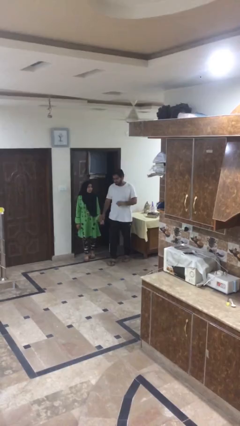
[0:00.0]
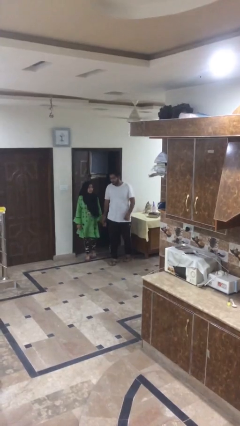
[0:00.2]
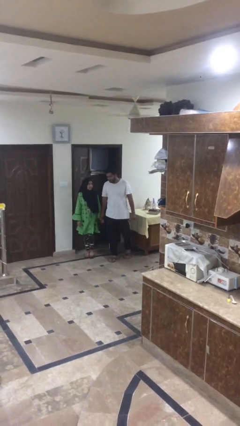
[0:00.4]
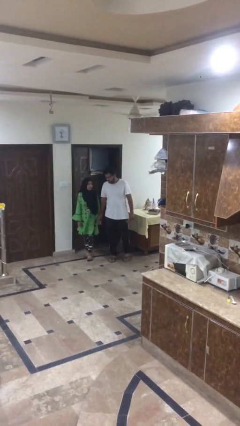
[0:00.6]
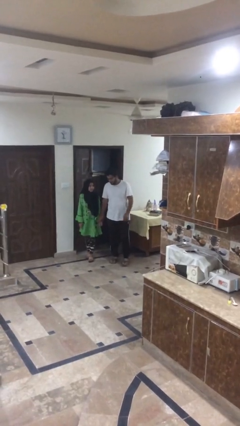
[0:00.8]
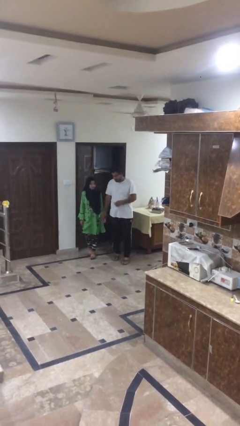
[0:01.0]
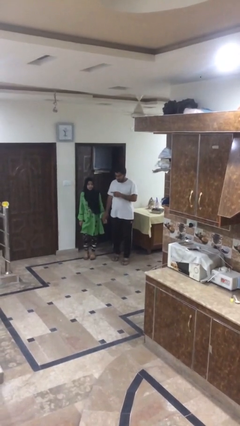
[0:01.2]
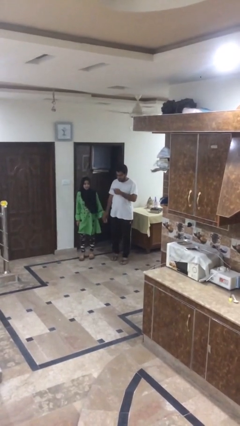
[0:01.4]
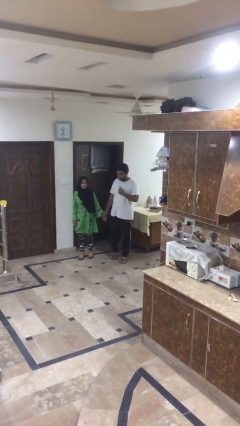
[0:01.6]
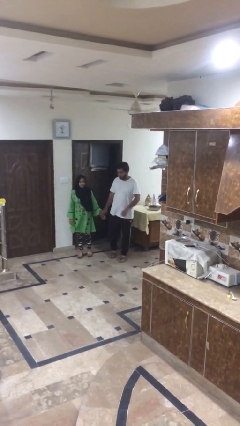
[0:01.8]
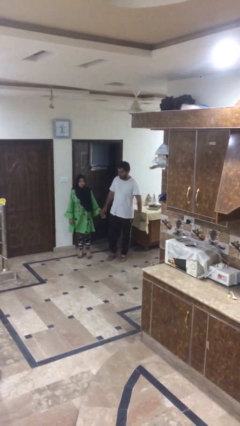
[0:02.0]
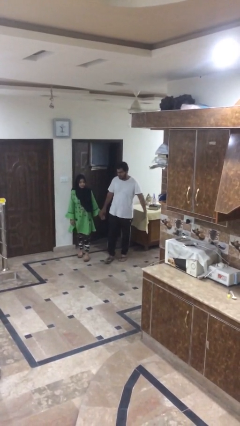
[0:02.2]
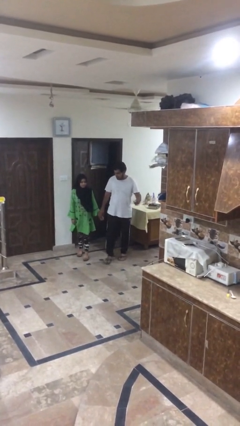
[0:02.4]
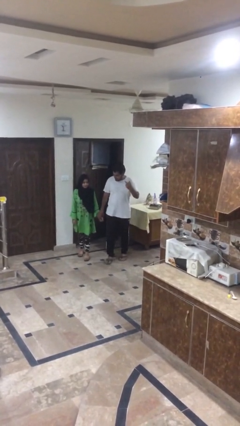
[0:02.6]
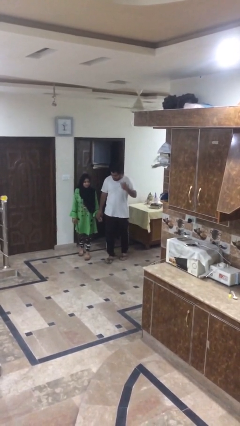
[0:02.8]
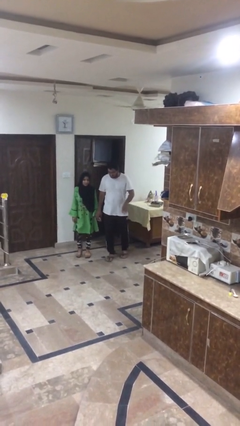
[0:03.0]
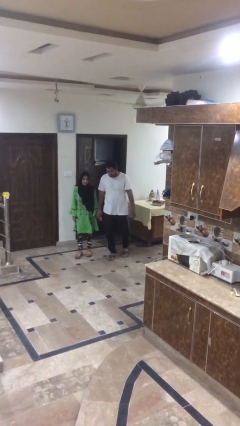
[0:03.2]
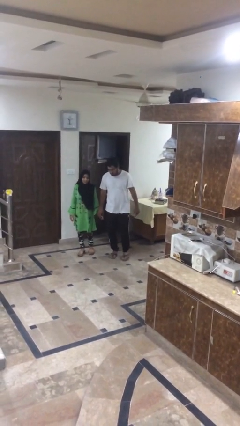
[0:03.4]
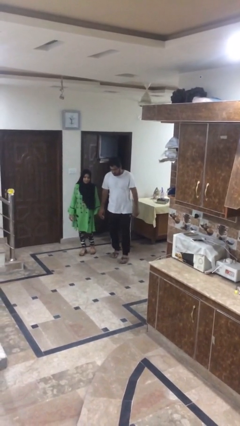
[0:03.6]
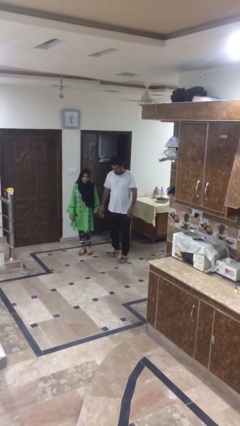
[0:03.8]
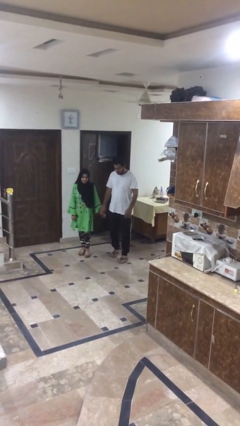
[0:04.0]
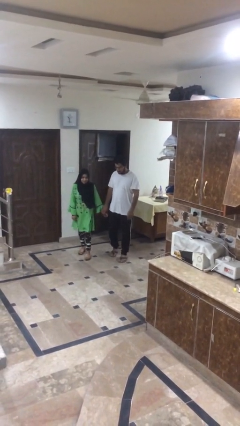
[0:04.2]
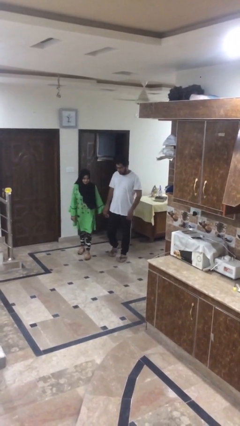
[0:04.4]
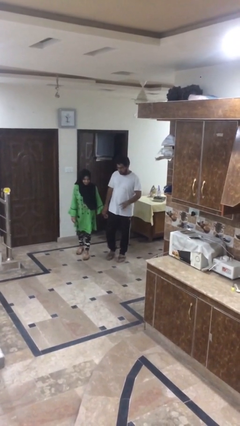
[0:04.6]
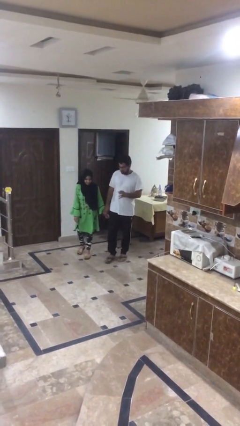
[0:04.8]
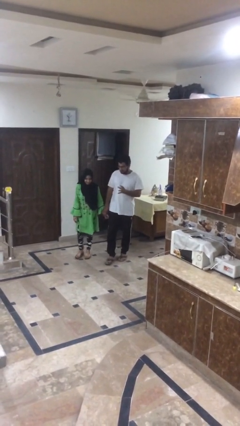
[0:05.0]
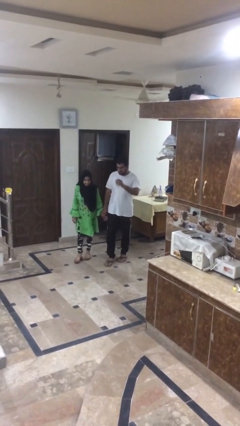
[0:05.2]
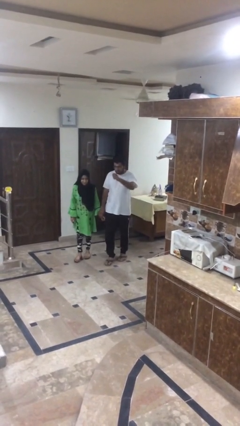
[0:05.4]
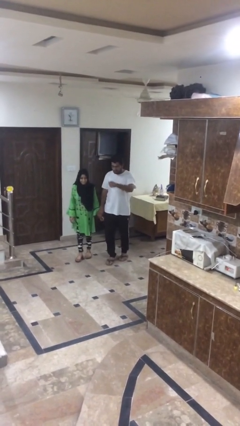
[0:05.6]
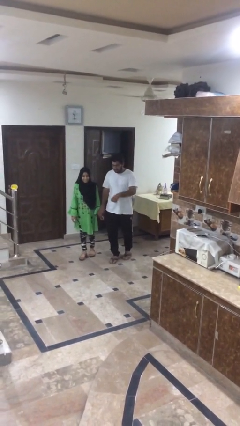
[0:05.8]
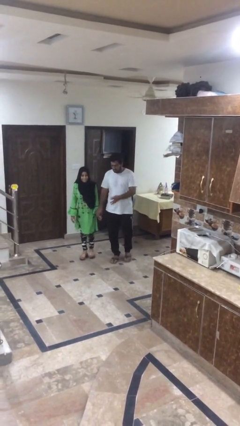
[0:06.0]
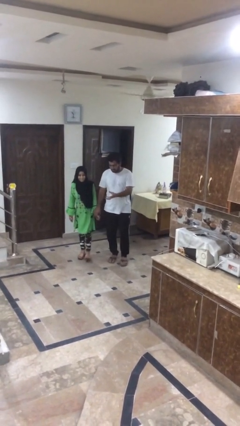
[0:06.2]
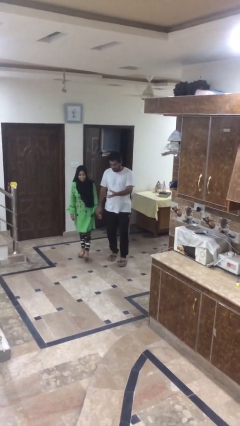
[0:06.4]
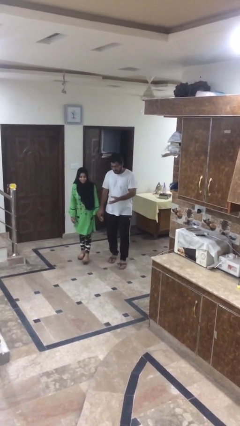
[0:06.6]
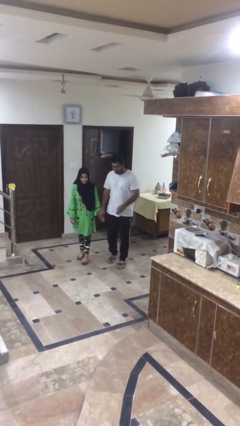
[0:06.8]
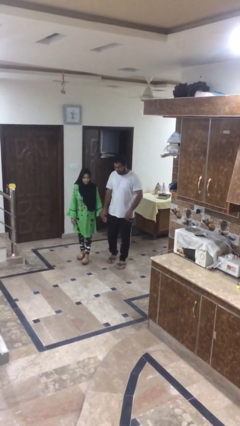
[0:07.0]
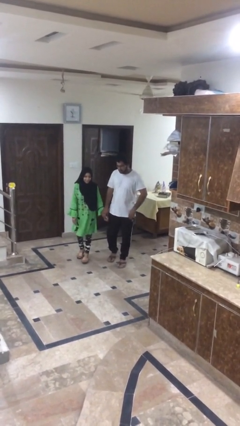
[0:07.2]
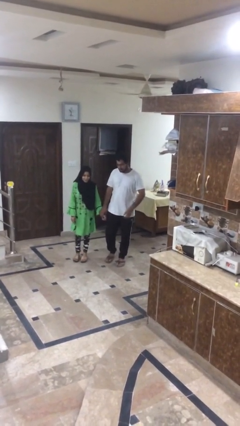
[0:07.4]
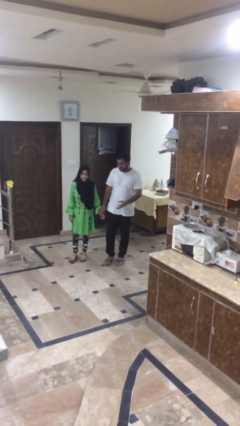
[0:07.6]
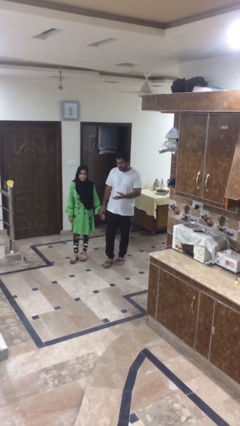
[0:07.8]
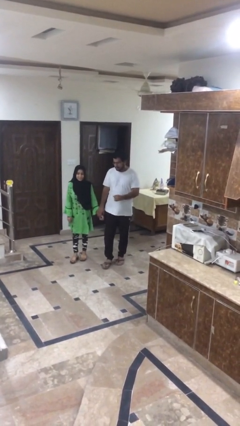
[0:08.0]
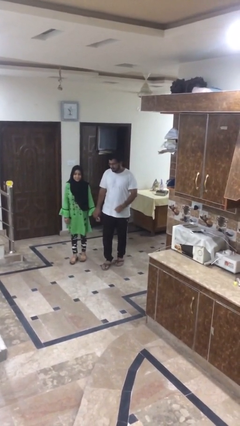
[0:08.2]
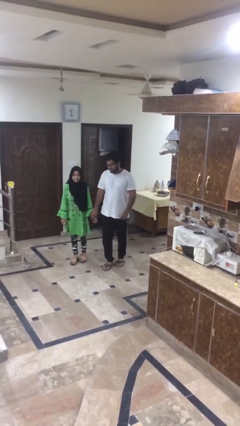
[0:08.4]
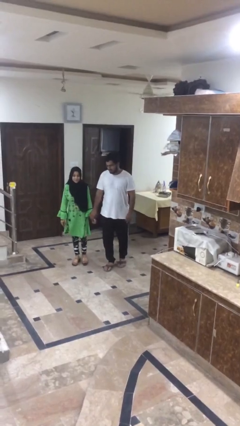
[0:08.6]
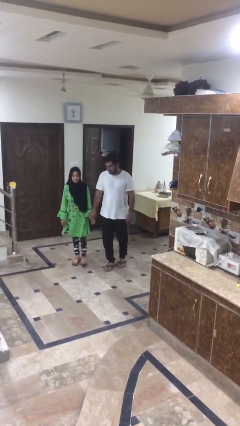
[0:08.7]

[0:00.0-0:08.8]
person holds hand

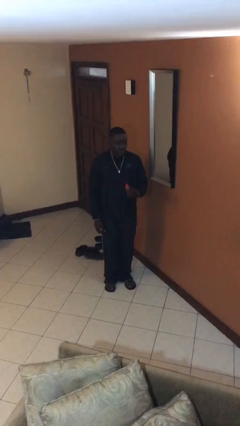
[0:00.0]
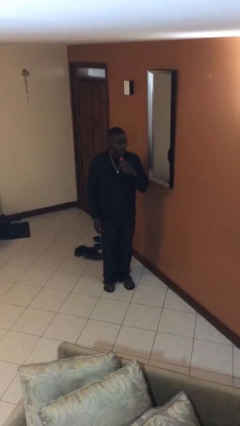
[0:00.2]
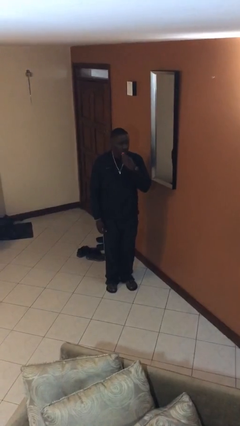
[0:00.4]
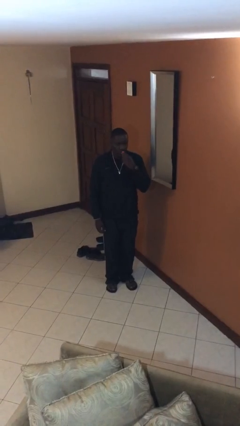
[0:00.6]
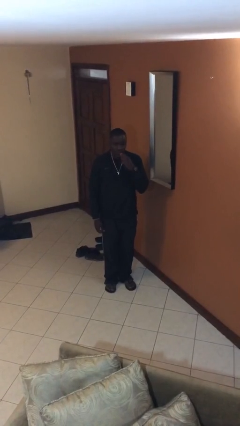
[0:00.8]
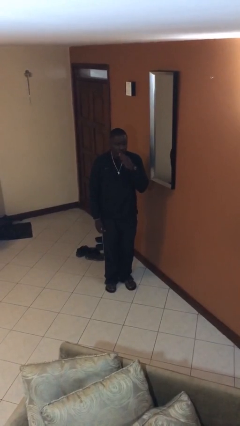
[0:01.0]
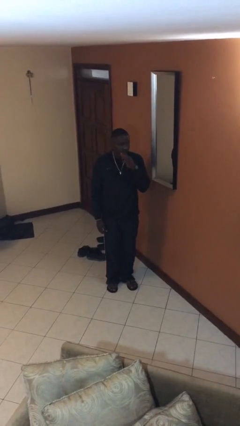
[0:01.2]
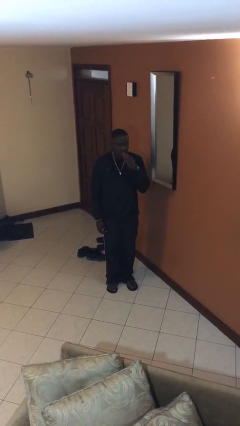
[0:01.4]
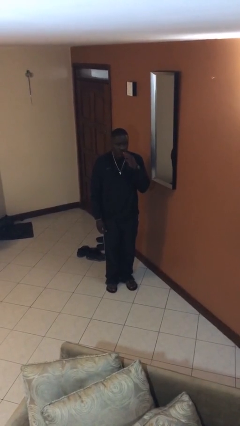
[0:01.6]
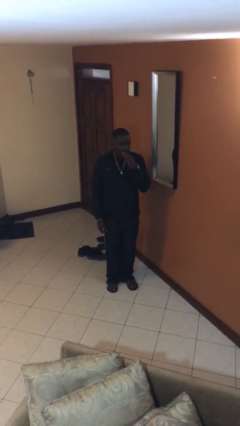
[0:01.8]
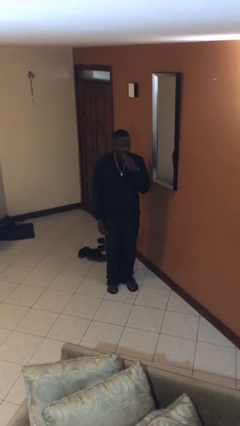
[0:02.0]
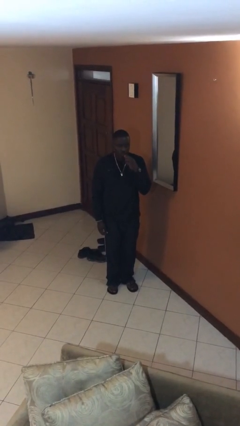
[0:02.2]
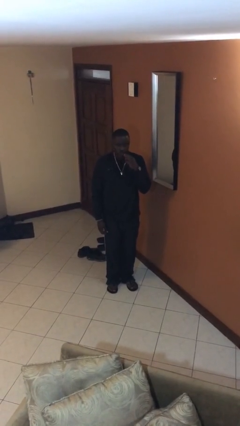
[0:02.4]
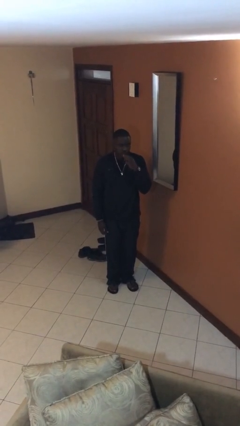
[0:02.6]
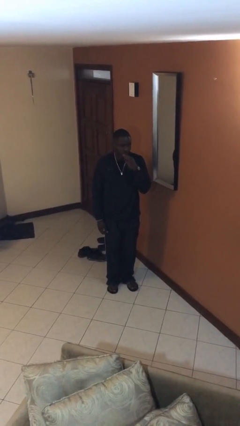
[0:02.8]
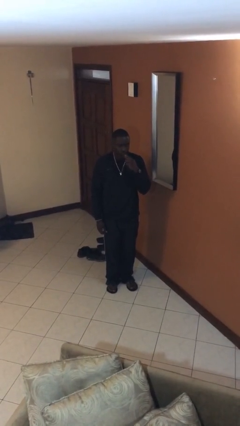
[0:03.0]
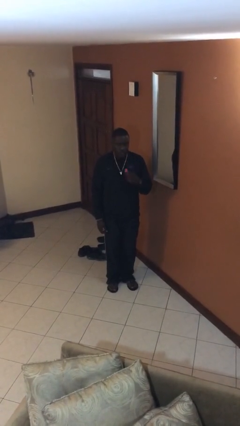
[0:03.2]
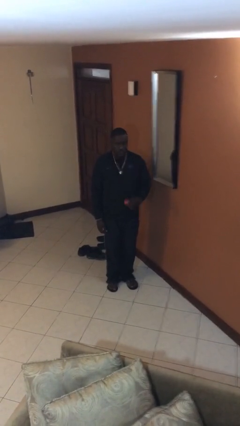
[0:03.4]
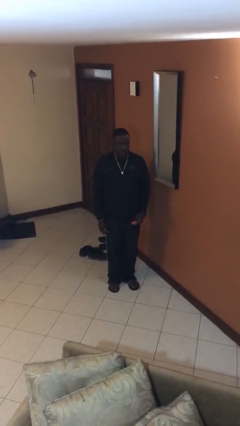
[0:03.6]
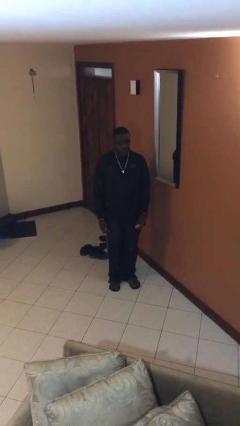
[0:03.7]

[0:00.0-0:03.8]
person applies lip makeup

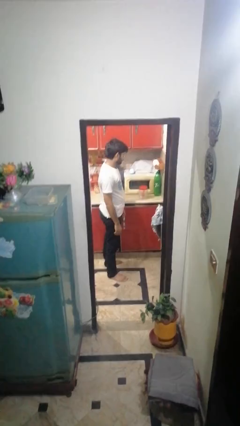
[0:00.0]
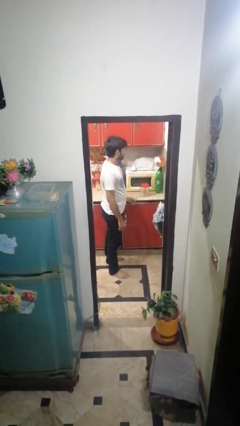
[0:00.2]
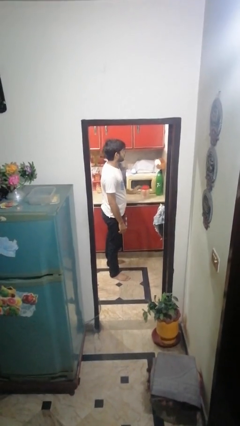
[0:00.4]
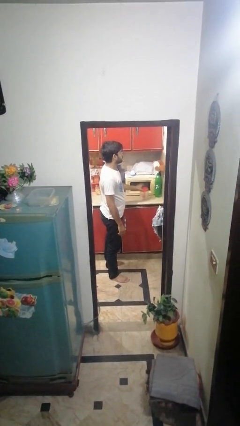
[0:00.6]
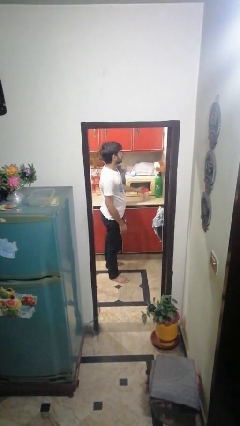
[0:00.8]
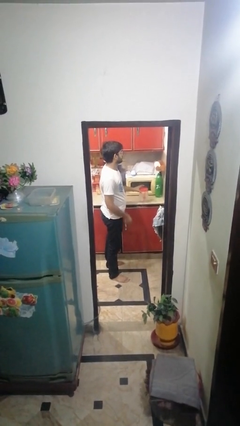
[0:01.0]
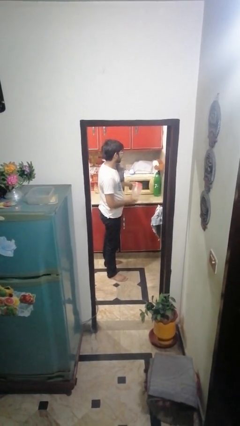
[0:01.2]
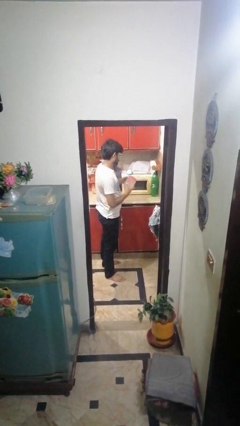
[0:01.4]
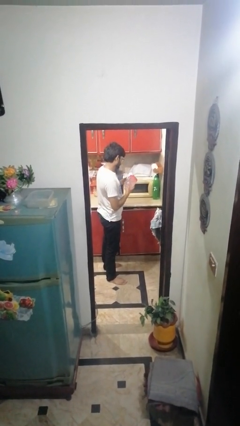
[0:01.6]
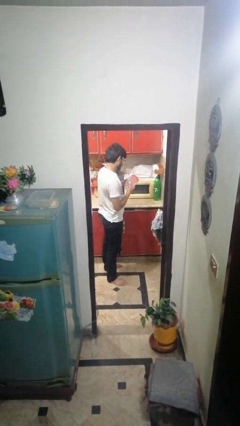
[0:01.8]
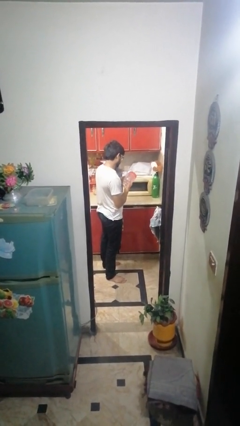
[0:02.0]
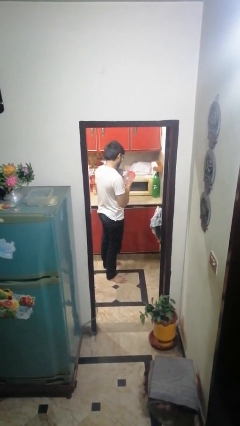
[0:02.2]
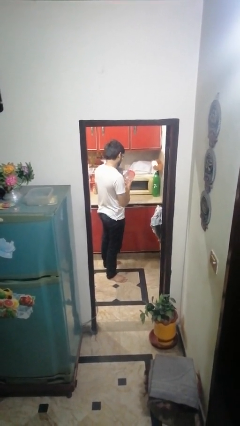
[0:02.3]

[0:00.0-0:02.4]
person picks up object from countertop

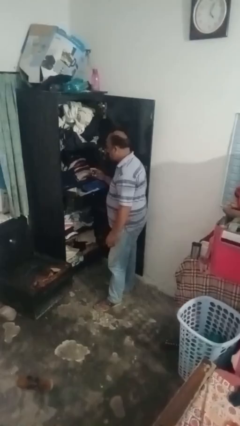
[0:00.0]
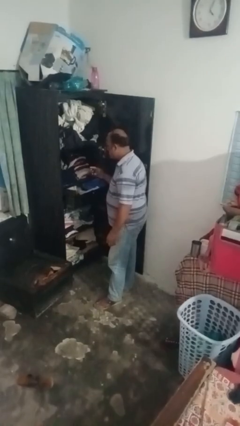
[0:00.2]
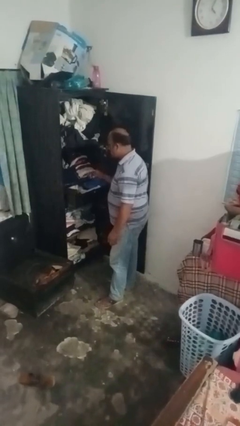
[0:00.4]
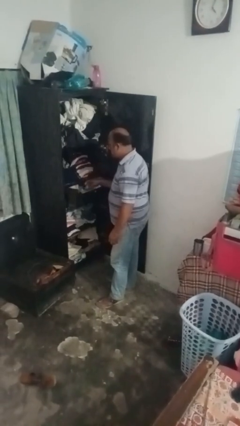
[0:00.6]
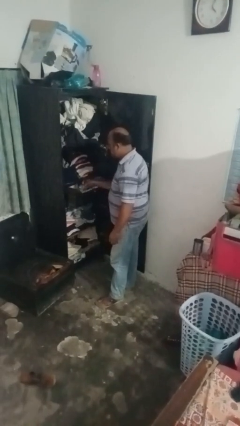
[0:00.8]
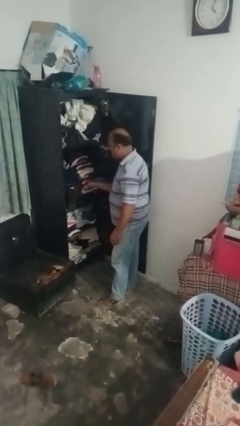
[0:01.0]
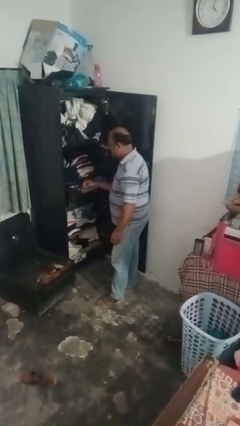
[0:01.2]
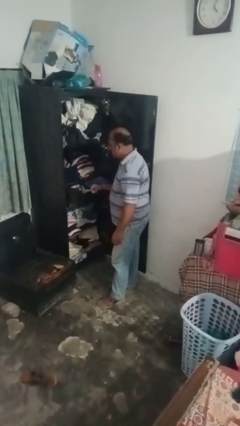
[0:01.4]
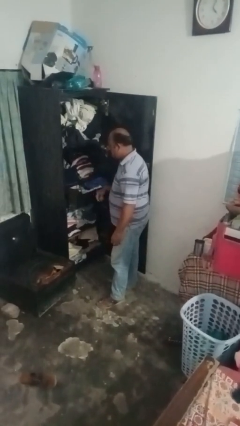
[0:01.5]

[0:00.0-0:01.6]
person takes clothes from dresser

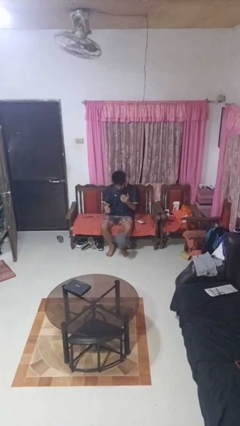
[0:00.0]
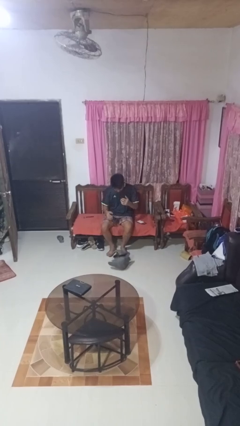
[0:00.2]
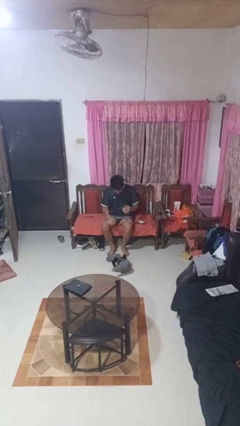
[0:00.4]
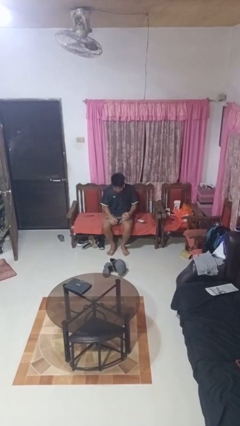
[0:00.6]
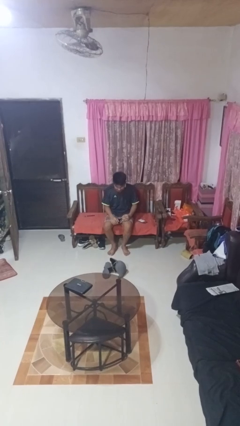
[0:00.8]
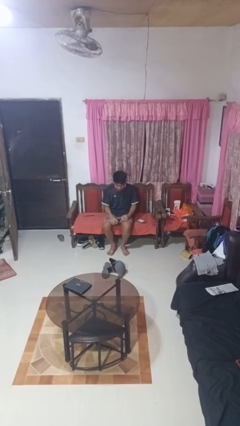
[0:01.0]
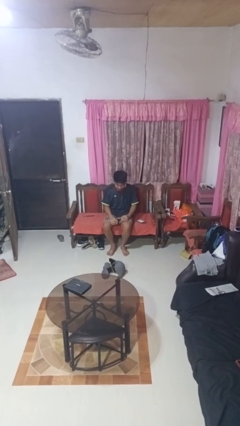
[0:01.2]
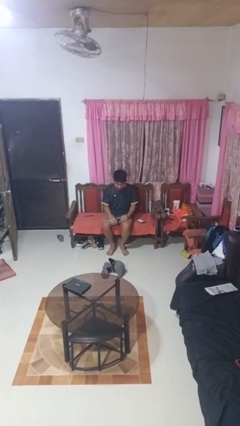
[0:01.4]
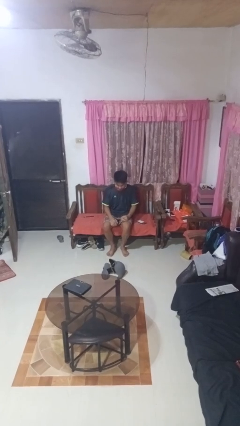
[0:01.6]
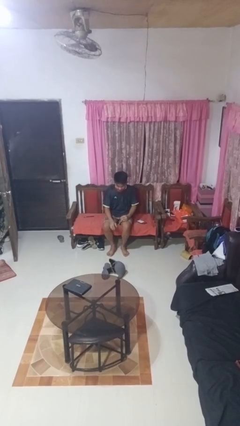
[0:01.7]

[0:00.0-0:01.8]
person drops object
